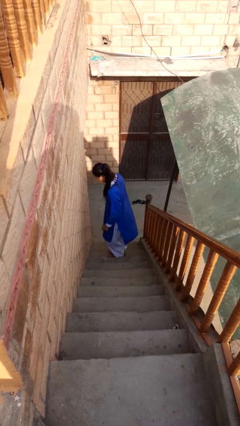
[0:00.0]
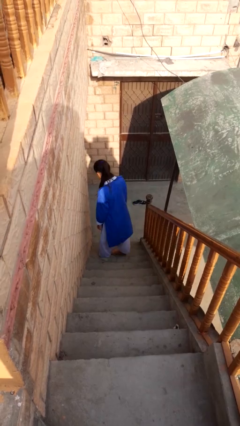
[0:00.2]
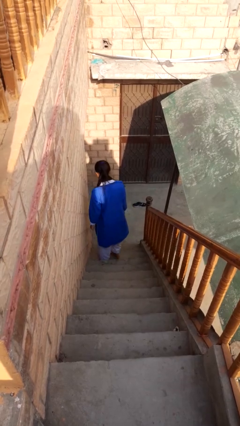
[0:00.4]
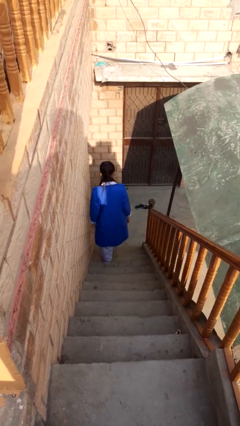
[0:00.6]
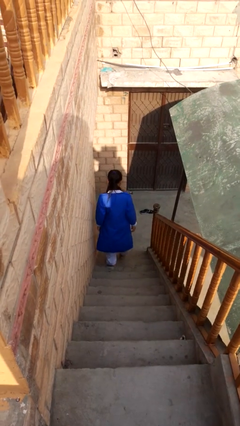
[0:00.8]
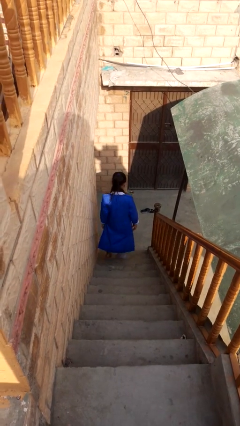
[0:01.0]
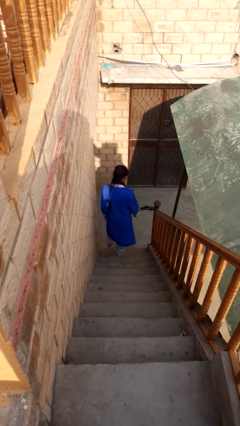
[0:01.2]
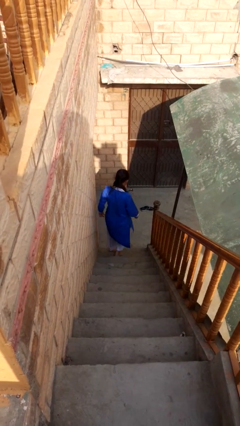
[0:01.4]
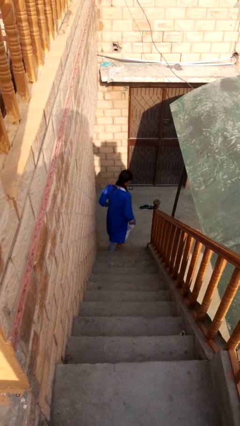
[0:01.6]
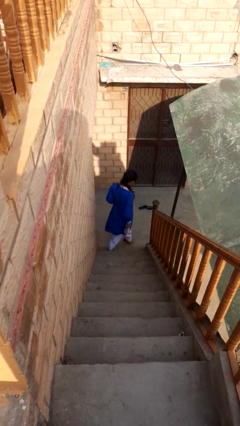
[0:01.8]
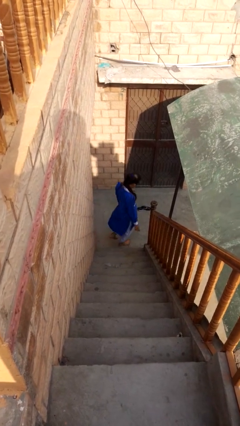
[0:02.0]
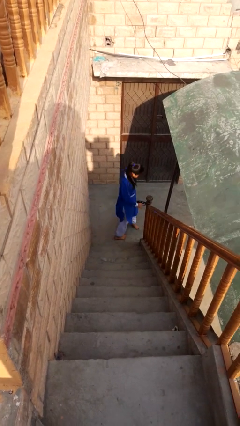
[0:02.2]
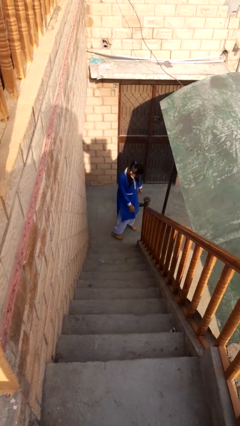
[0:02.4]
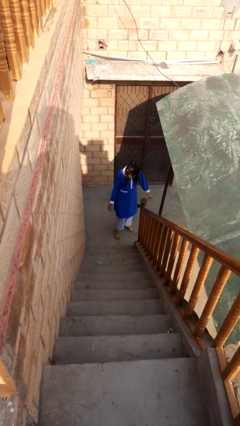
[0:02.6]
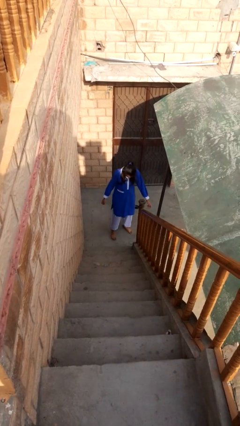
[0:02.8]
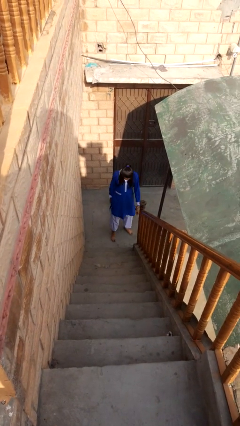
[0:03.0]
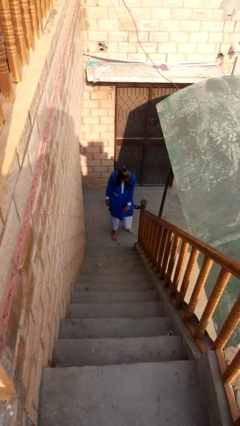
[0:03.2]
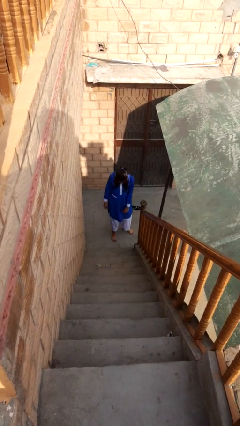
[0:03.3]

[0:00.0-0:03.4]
person climbs down stairs

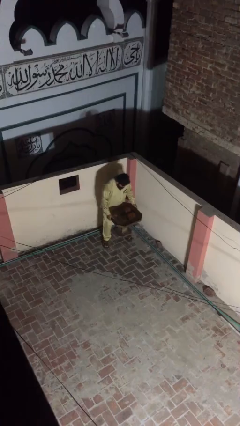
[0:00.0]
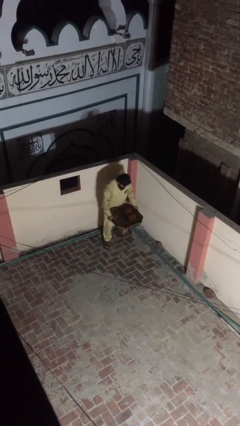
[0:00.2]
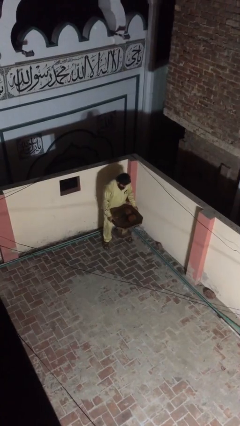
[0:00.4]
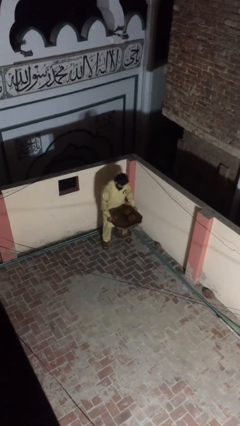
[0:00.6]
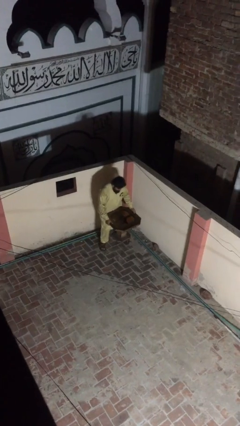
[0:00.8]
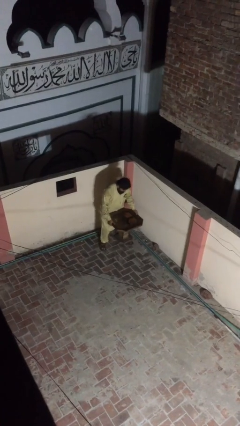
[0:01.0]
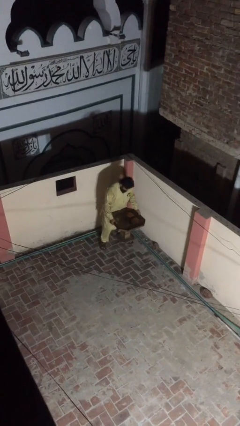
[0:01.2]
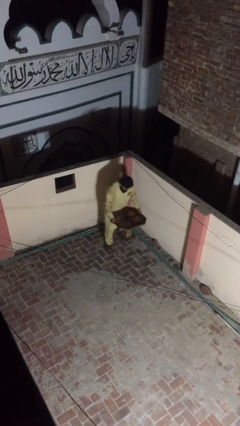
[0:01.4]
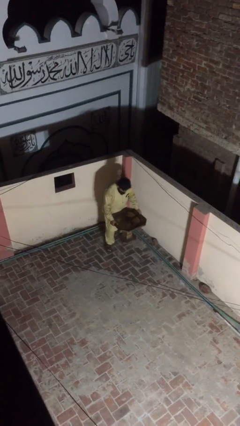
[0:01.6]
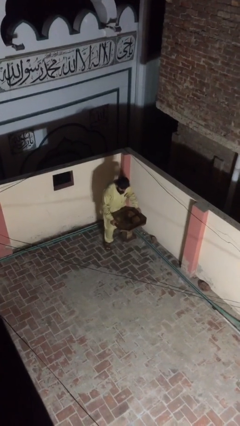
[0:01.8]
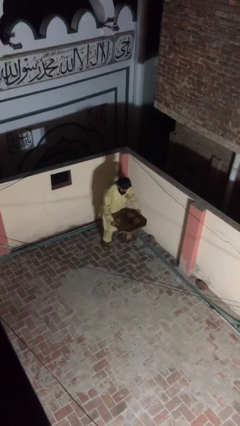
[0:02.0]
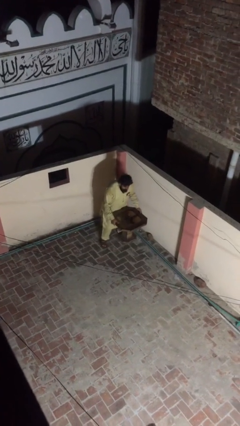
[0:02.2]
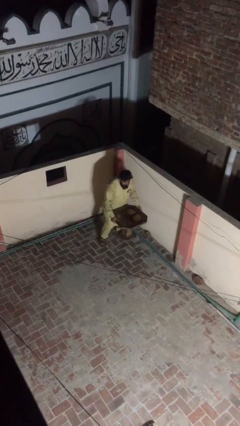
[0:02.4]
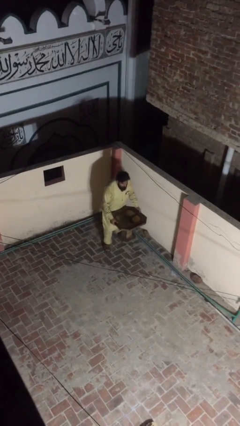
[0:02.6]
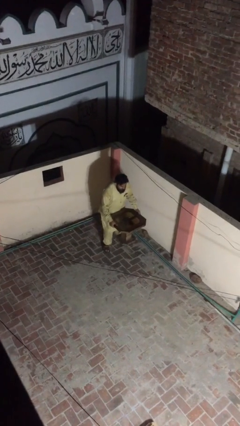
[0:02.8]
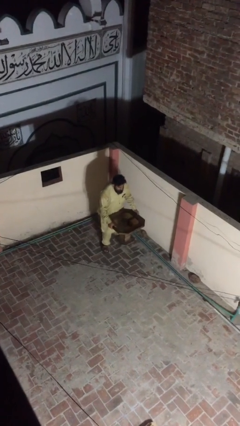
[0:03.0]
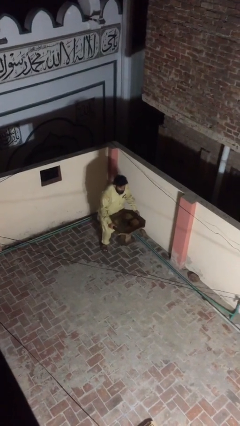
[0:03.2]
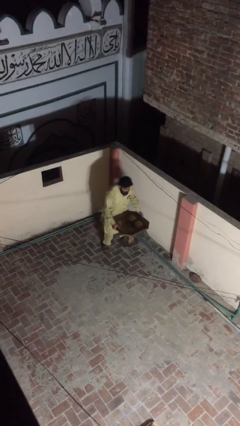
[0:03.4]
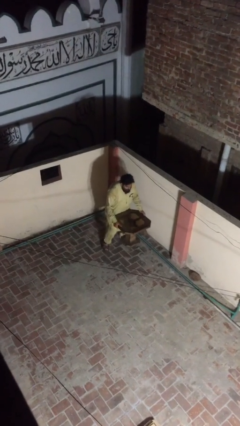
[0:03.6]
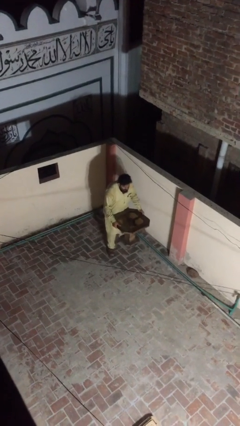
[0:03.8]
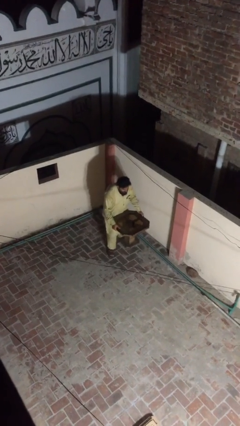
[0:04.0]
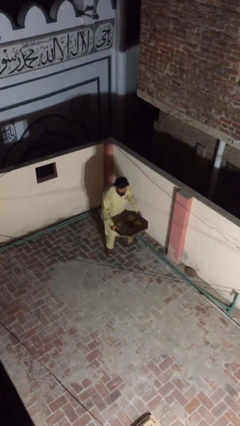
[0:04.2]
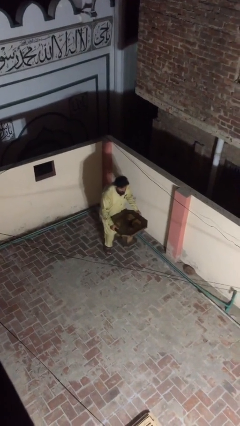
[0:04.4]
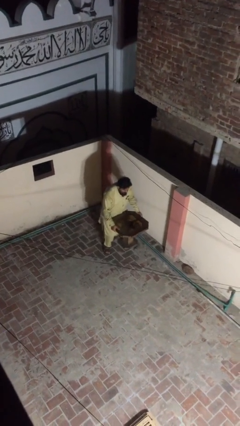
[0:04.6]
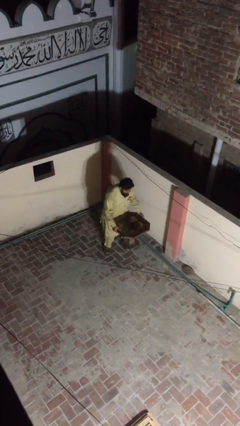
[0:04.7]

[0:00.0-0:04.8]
person carries heavy object

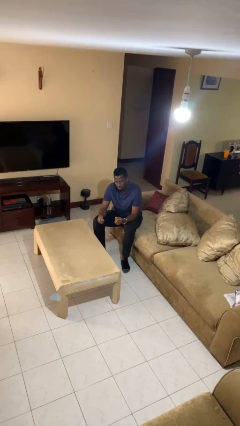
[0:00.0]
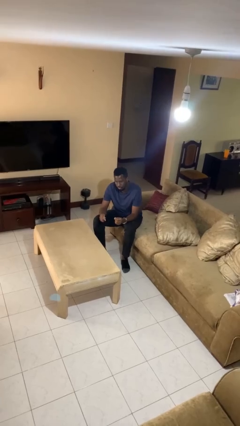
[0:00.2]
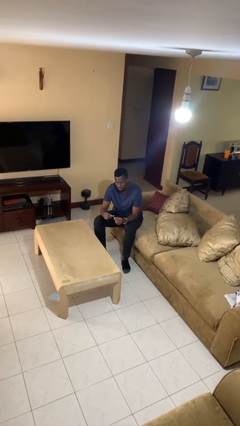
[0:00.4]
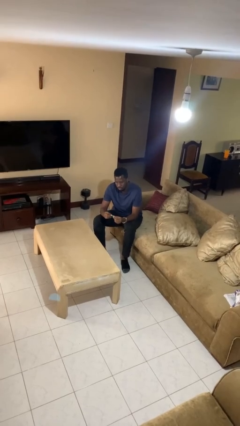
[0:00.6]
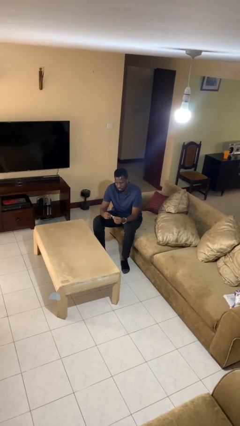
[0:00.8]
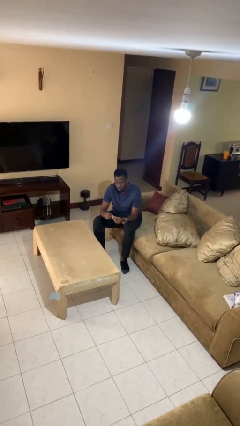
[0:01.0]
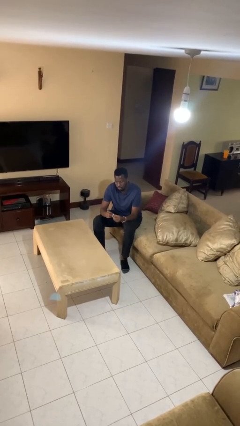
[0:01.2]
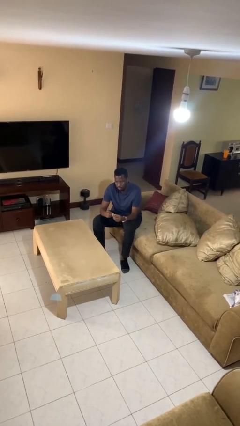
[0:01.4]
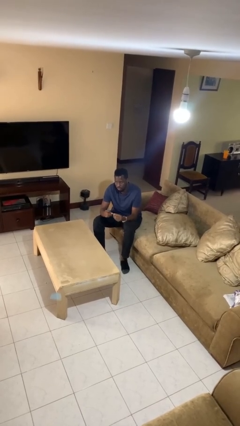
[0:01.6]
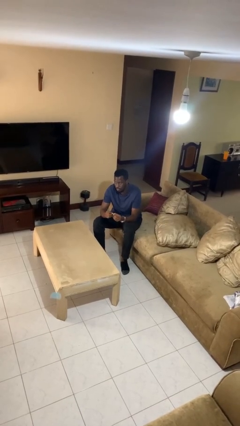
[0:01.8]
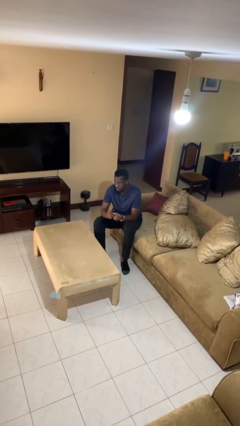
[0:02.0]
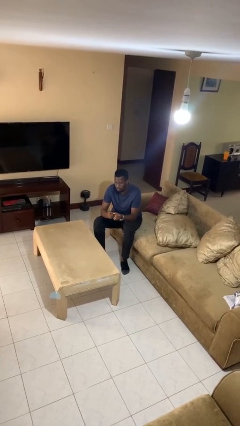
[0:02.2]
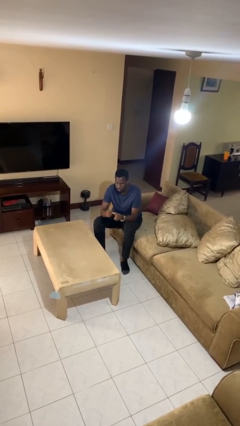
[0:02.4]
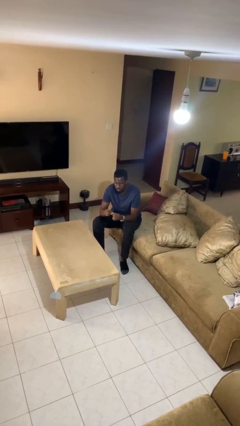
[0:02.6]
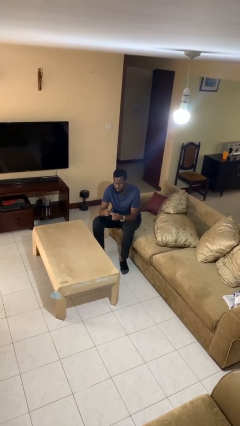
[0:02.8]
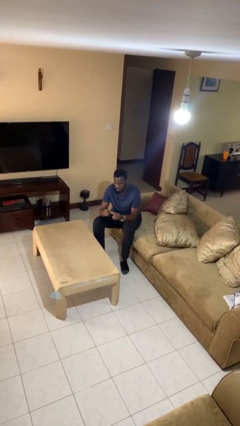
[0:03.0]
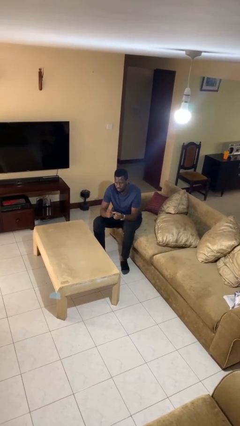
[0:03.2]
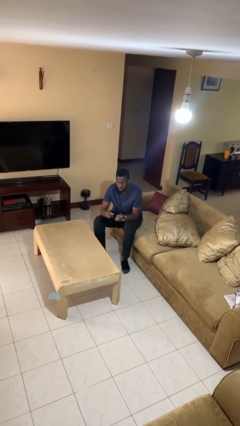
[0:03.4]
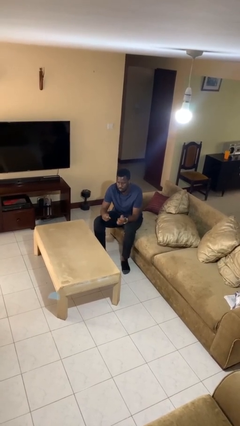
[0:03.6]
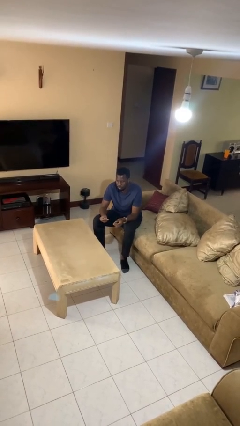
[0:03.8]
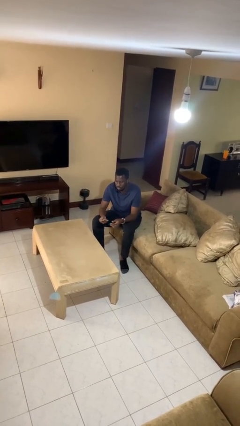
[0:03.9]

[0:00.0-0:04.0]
person files fingernails

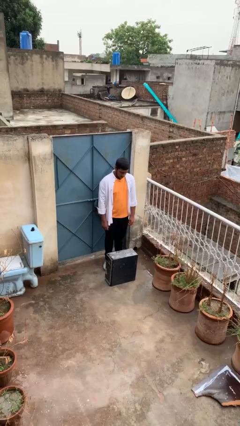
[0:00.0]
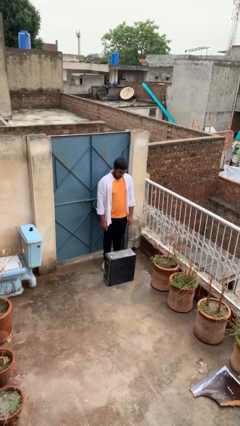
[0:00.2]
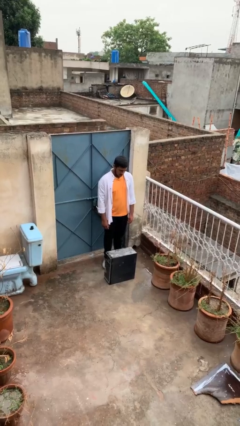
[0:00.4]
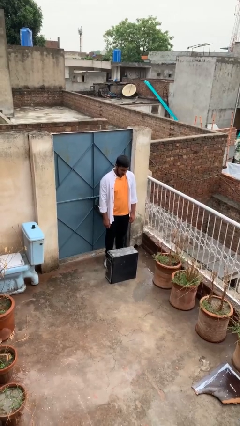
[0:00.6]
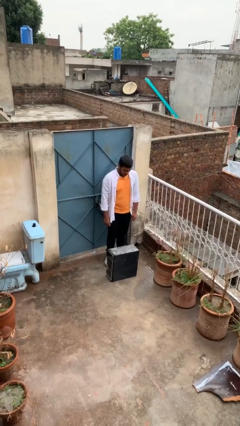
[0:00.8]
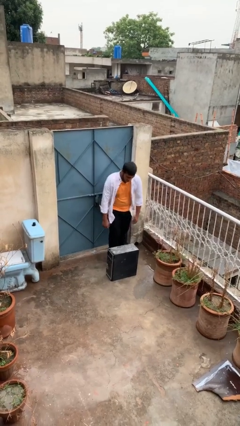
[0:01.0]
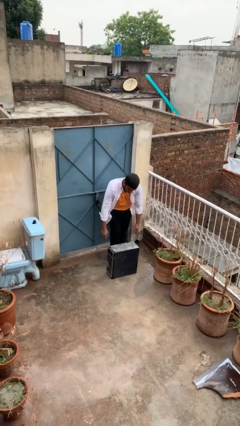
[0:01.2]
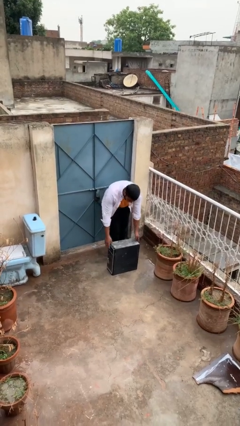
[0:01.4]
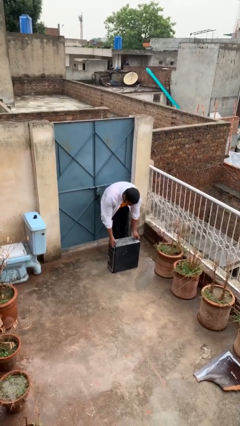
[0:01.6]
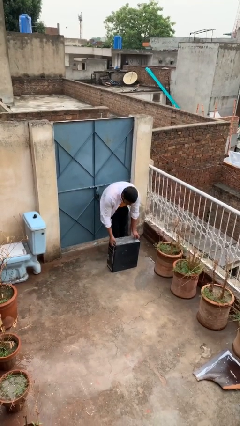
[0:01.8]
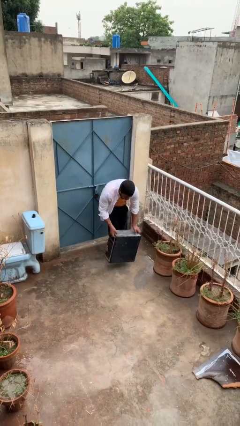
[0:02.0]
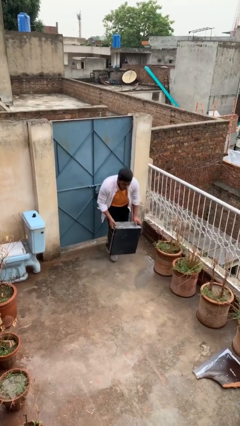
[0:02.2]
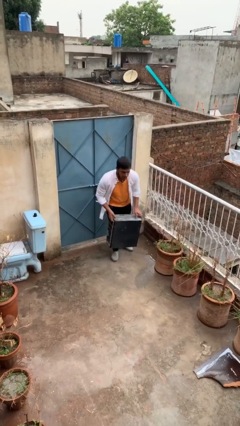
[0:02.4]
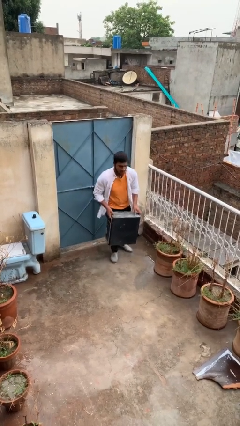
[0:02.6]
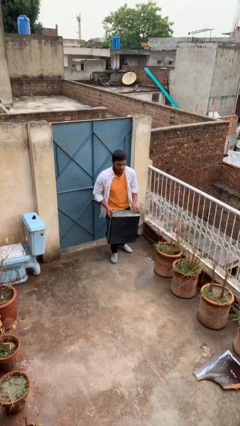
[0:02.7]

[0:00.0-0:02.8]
person picks up object from floor

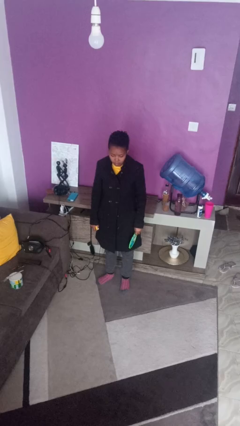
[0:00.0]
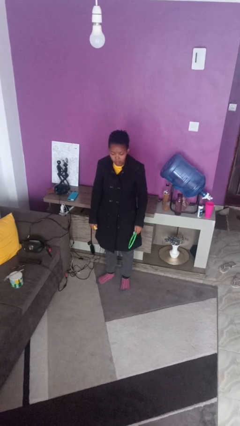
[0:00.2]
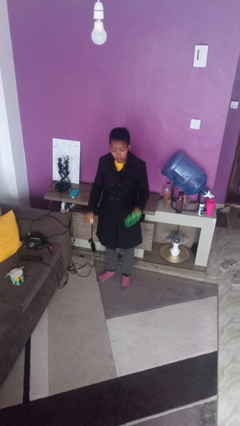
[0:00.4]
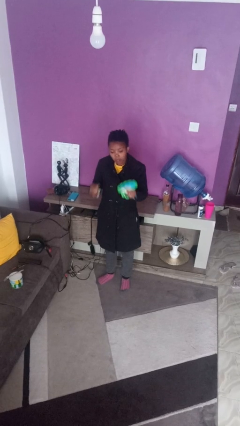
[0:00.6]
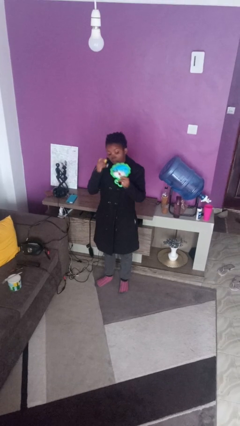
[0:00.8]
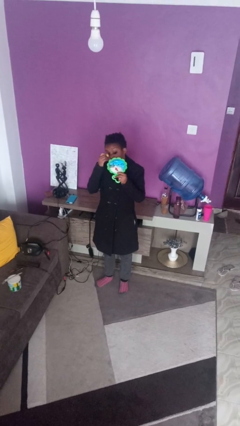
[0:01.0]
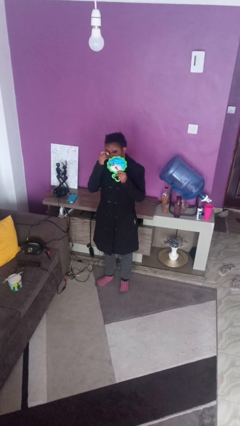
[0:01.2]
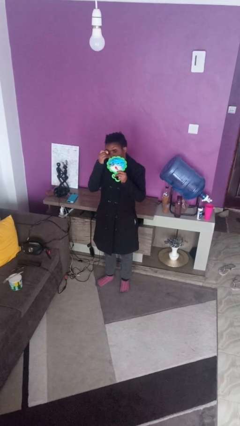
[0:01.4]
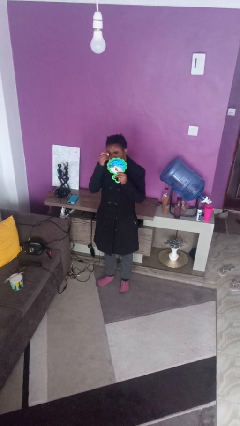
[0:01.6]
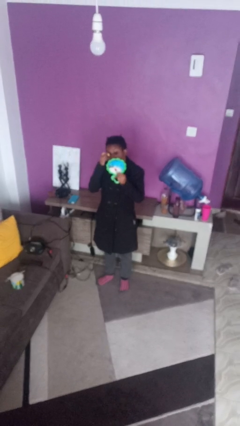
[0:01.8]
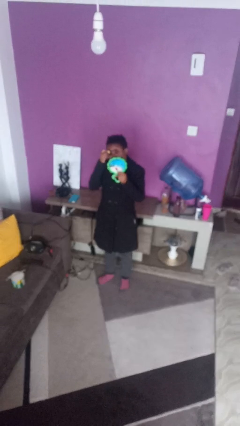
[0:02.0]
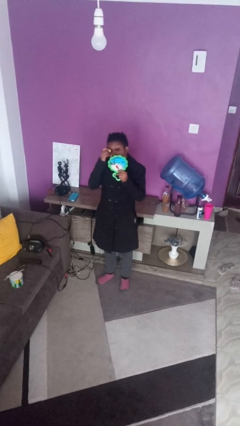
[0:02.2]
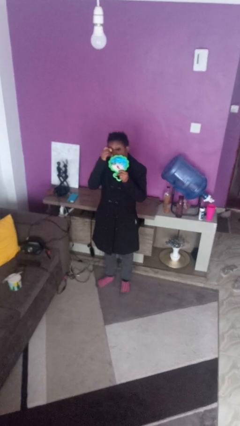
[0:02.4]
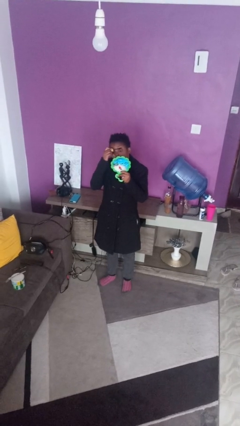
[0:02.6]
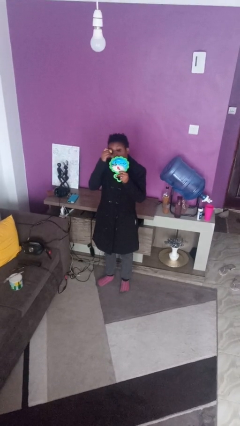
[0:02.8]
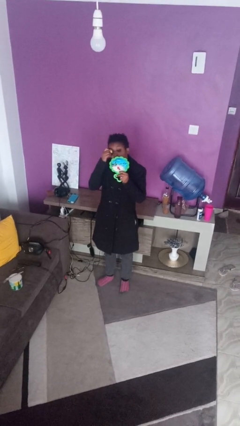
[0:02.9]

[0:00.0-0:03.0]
person applies eye makeup
